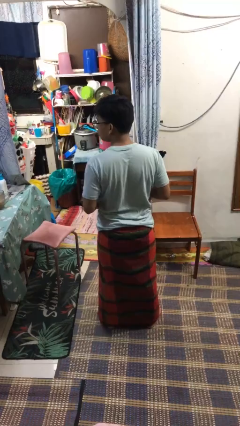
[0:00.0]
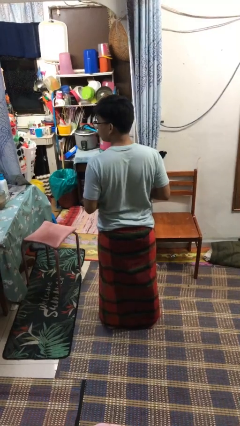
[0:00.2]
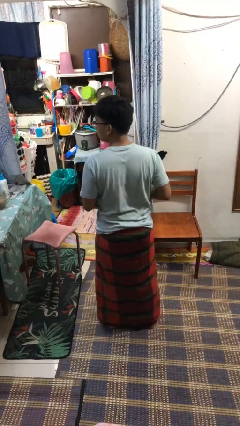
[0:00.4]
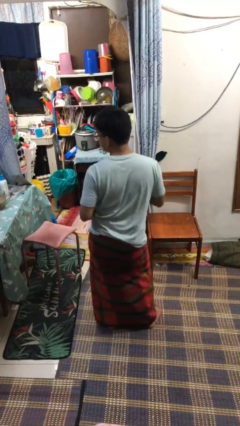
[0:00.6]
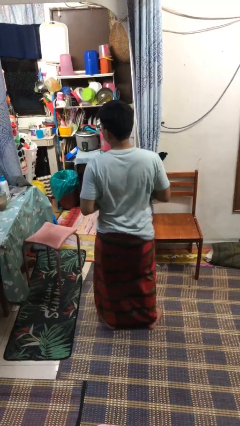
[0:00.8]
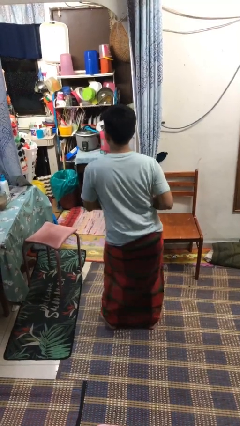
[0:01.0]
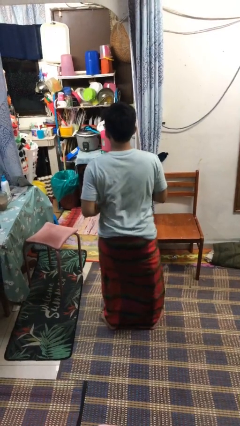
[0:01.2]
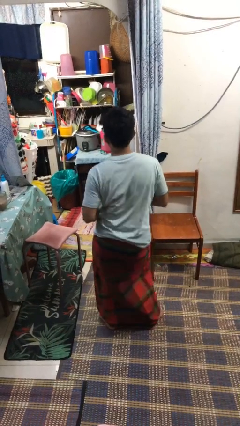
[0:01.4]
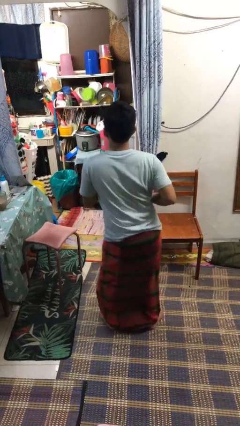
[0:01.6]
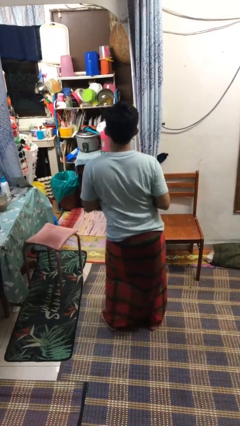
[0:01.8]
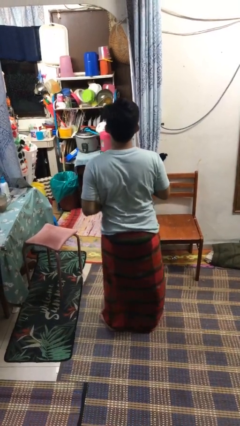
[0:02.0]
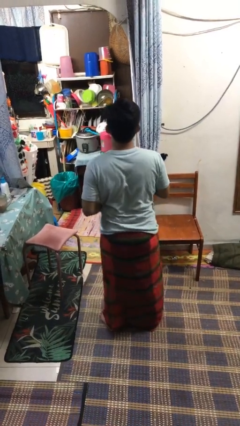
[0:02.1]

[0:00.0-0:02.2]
person wiggles hips

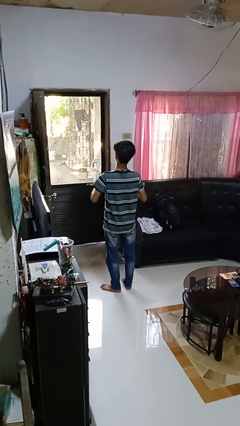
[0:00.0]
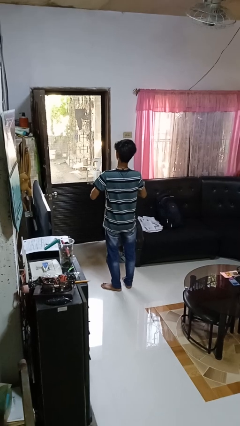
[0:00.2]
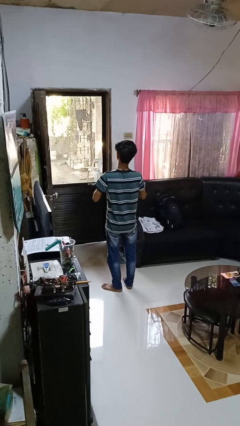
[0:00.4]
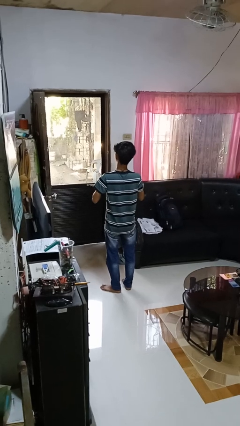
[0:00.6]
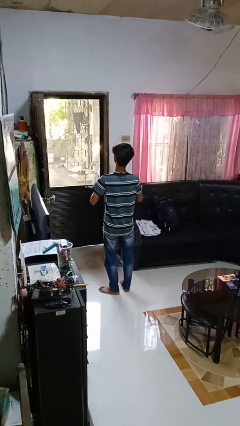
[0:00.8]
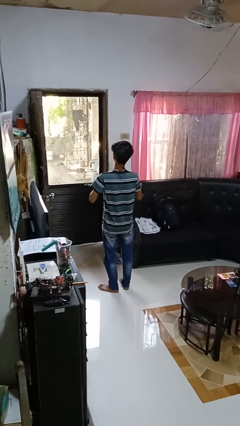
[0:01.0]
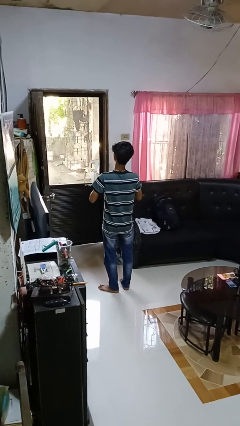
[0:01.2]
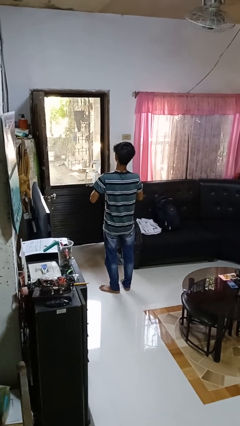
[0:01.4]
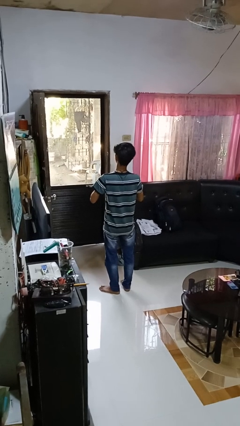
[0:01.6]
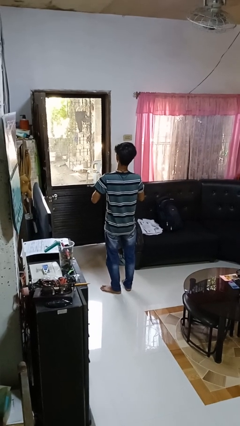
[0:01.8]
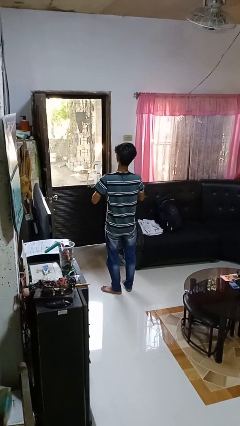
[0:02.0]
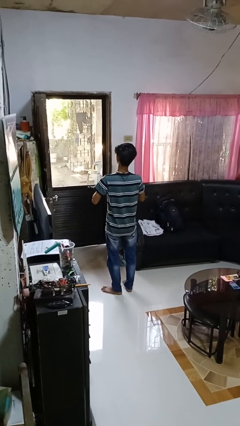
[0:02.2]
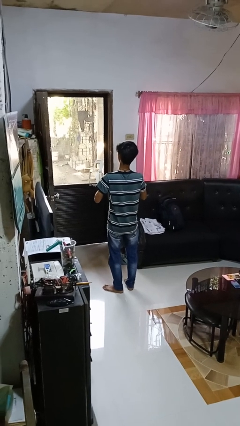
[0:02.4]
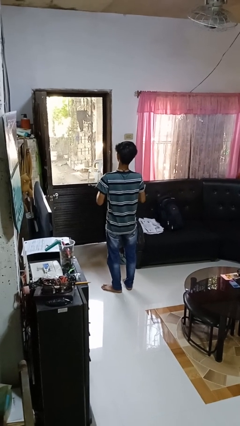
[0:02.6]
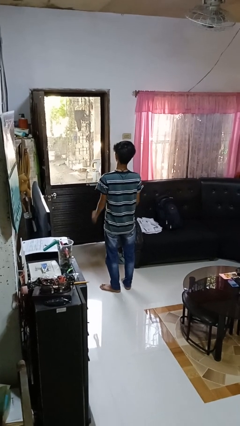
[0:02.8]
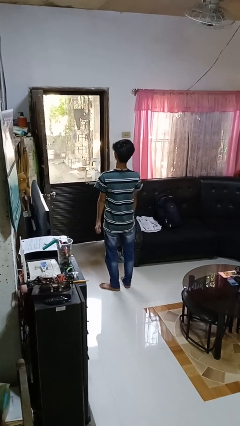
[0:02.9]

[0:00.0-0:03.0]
person buttons shirt

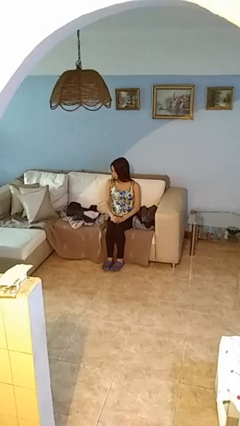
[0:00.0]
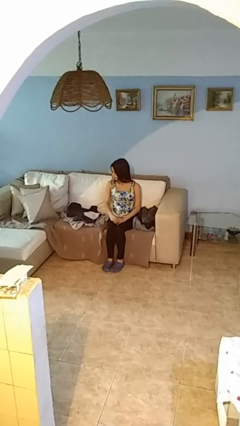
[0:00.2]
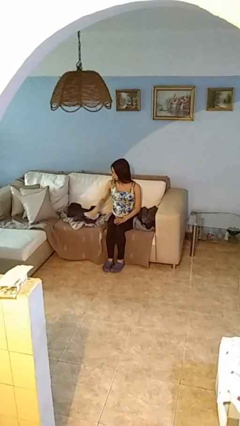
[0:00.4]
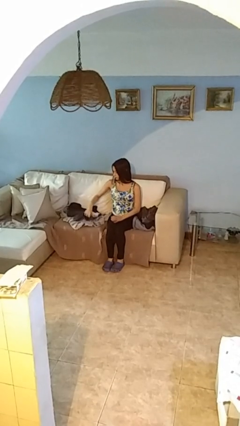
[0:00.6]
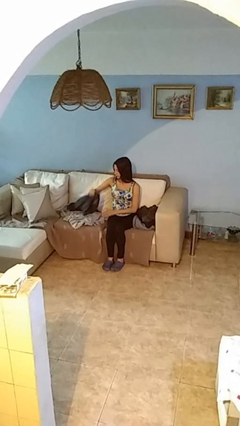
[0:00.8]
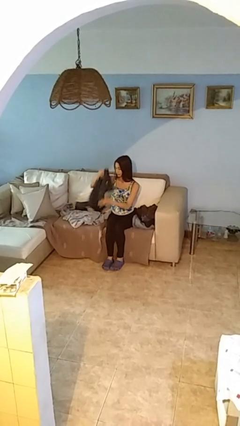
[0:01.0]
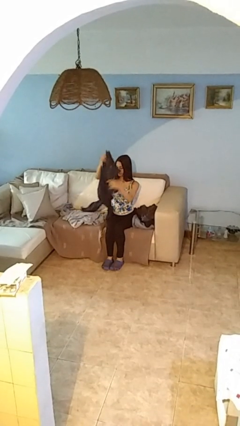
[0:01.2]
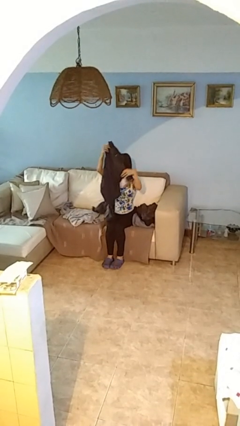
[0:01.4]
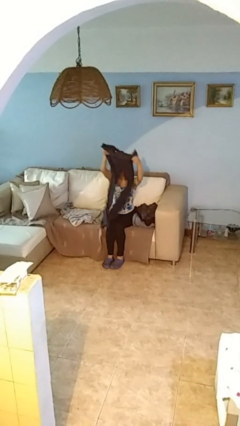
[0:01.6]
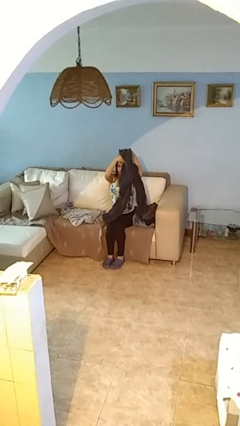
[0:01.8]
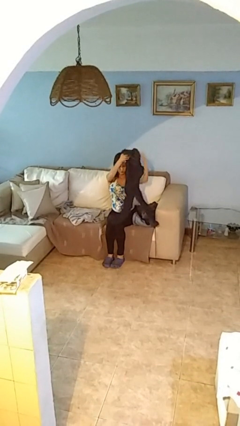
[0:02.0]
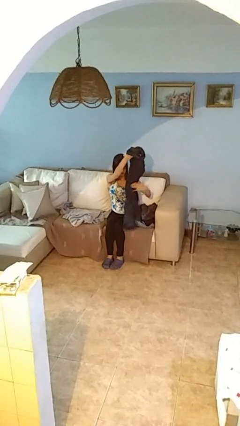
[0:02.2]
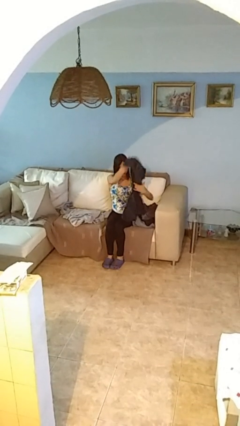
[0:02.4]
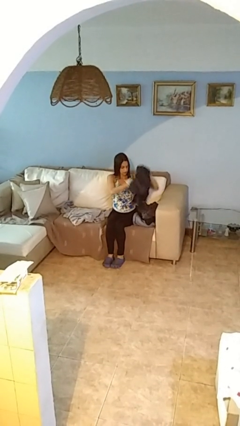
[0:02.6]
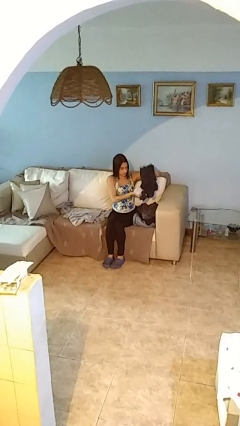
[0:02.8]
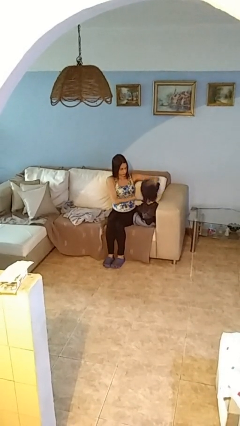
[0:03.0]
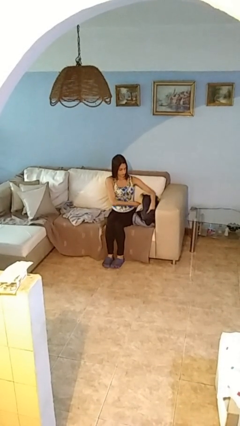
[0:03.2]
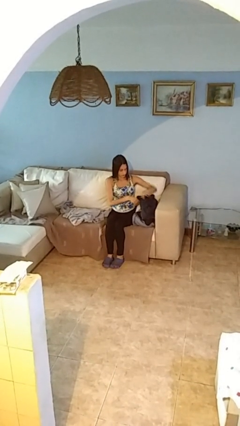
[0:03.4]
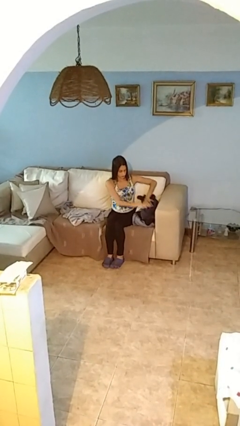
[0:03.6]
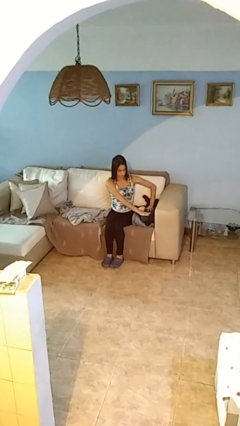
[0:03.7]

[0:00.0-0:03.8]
person folds pants

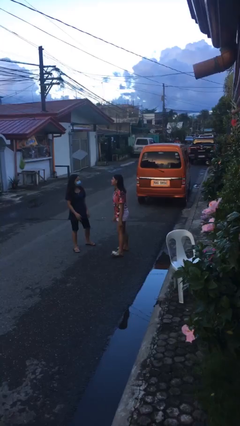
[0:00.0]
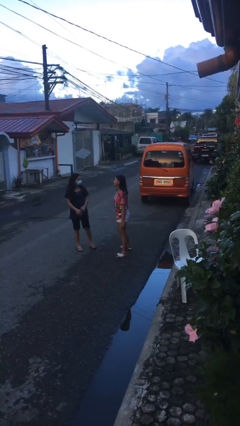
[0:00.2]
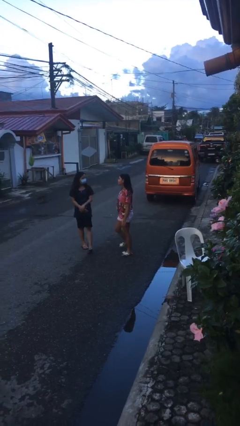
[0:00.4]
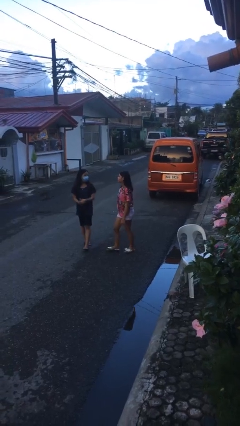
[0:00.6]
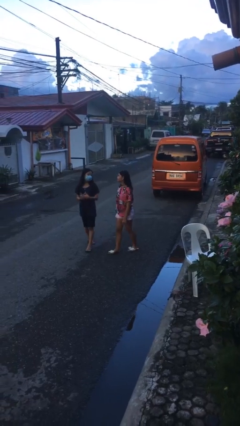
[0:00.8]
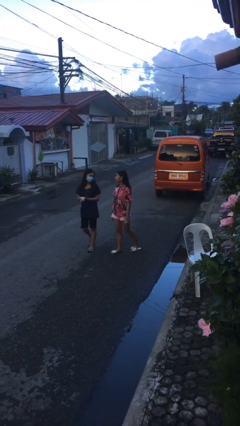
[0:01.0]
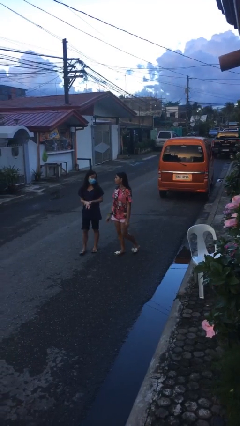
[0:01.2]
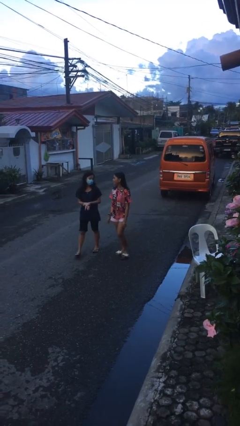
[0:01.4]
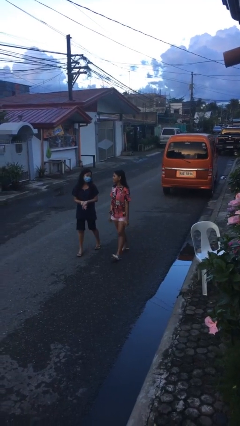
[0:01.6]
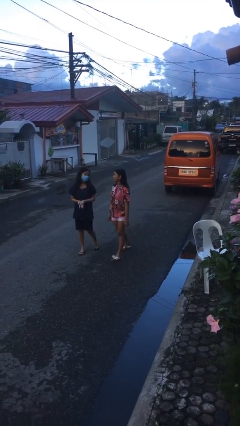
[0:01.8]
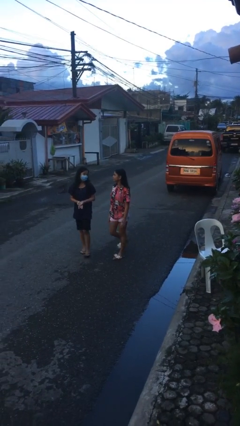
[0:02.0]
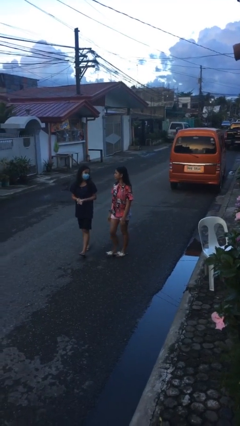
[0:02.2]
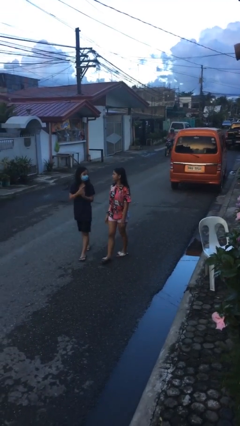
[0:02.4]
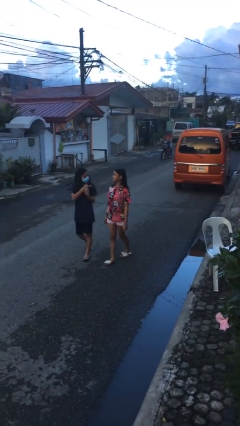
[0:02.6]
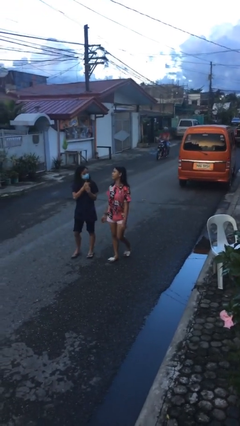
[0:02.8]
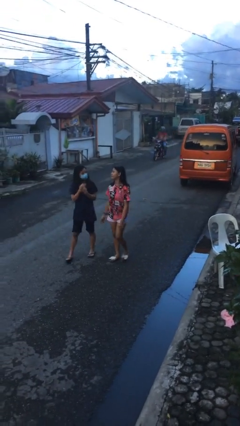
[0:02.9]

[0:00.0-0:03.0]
person talks to person

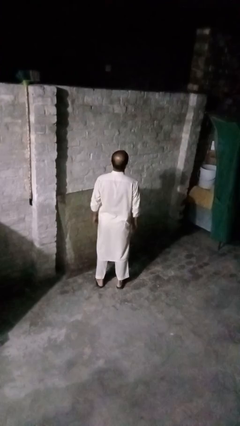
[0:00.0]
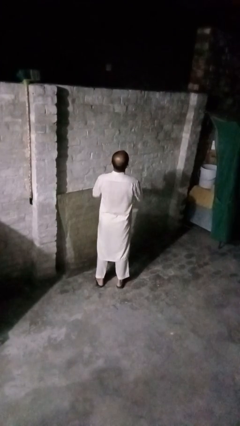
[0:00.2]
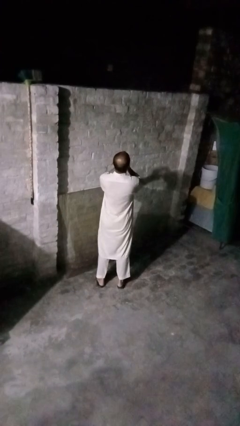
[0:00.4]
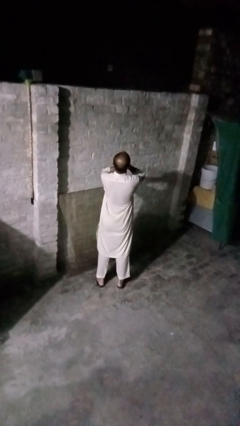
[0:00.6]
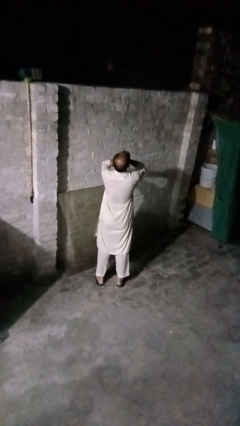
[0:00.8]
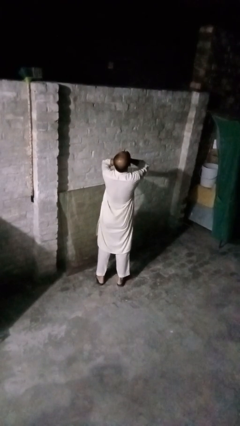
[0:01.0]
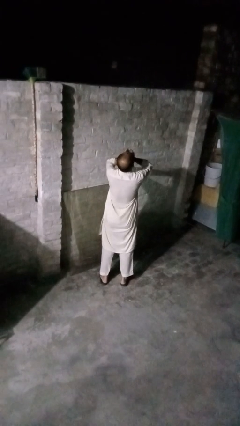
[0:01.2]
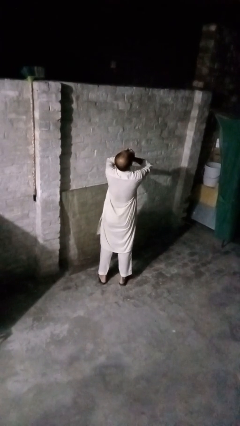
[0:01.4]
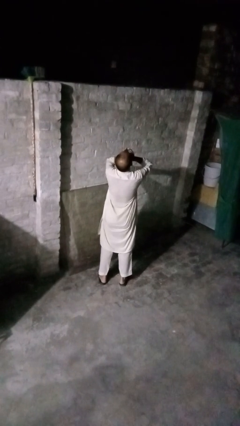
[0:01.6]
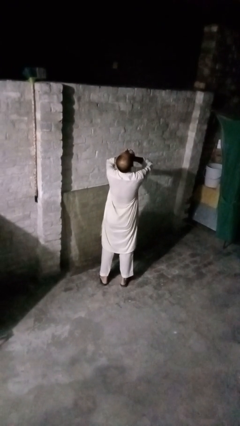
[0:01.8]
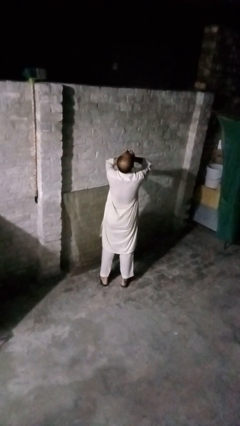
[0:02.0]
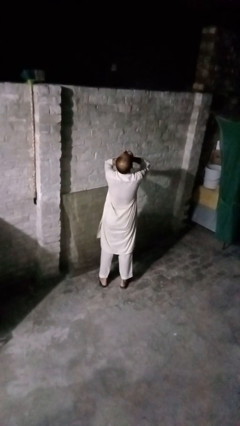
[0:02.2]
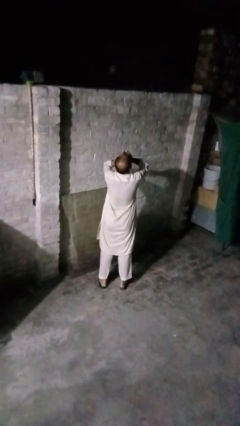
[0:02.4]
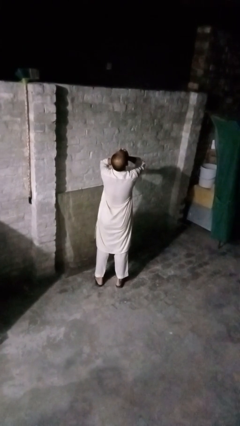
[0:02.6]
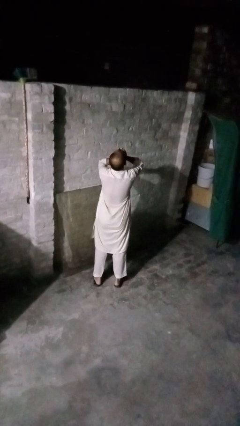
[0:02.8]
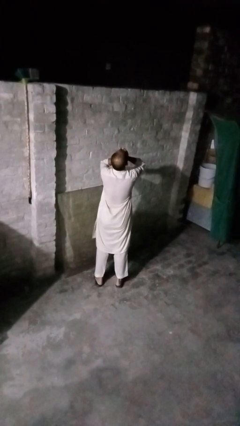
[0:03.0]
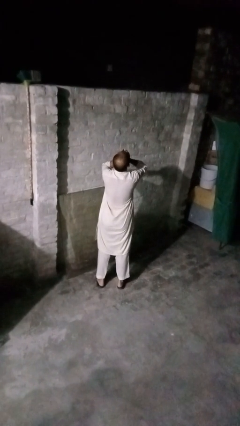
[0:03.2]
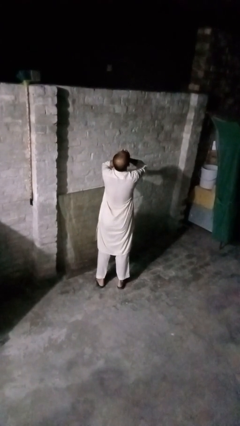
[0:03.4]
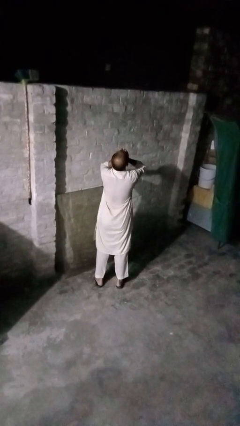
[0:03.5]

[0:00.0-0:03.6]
person sneezes into hand

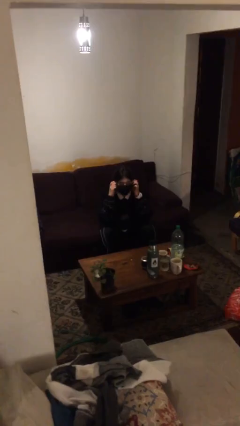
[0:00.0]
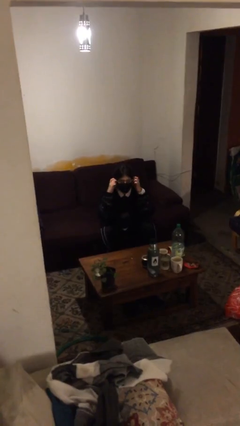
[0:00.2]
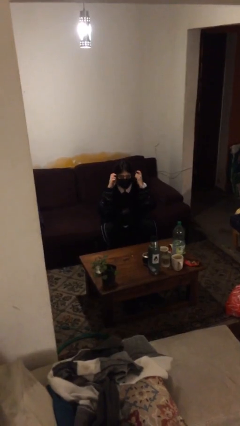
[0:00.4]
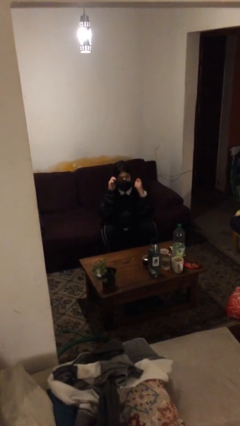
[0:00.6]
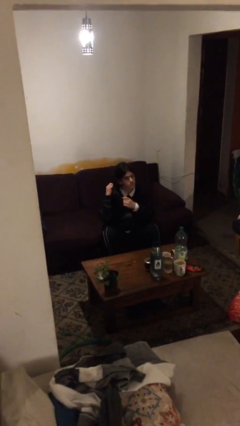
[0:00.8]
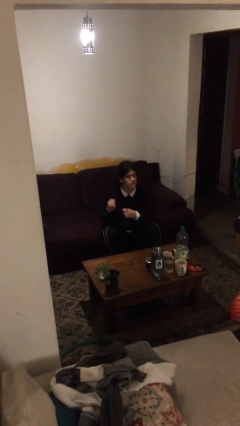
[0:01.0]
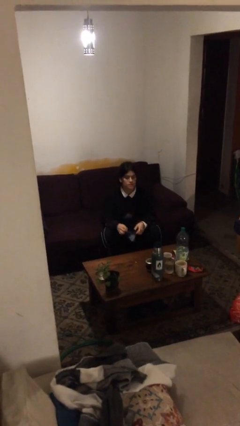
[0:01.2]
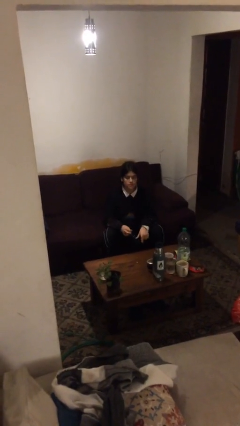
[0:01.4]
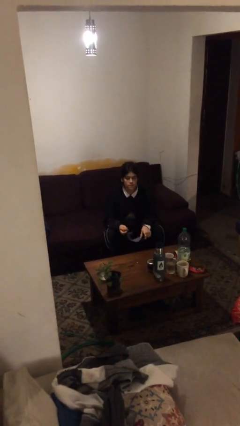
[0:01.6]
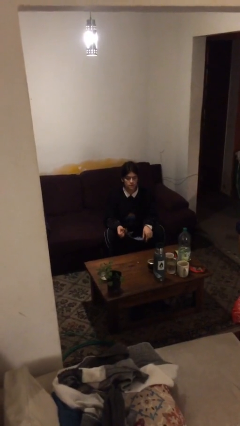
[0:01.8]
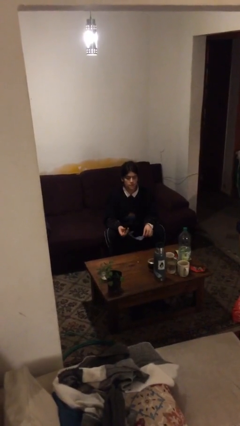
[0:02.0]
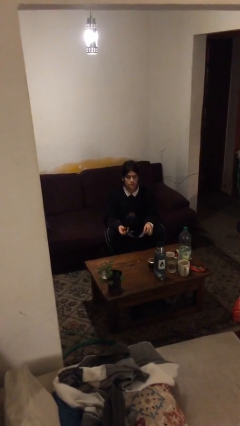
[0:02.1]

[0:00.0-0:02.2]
person takes off facemask
